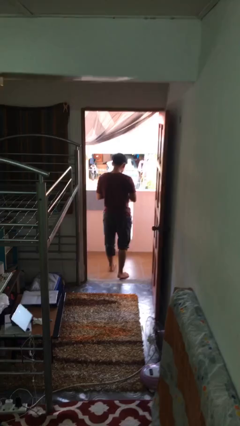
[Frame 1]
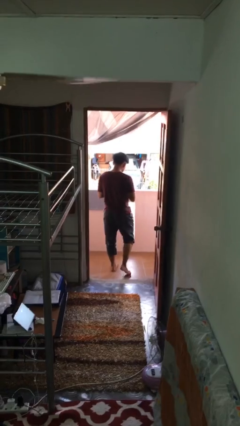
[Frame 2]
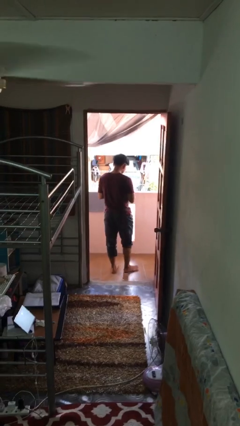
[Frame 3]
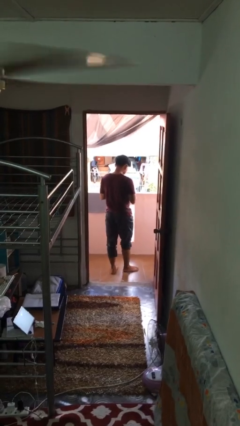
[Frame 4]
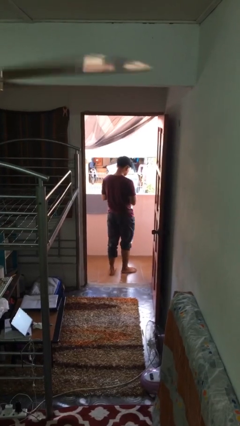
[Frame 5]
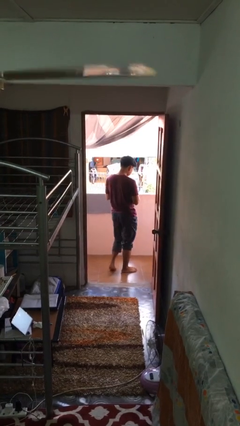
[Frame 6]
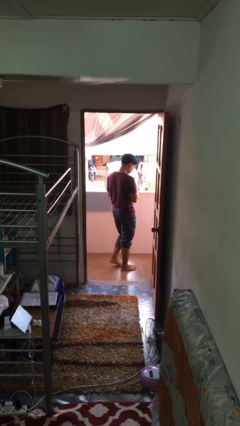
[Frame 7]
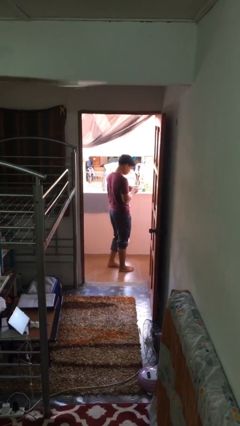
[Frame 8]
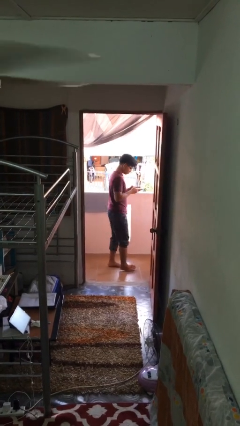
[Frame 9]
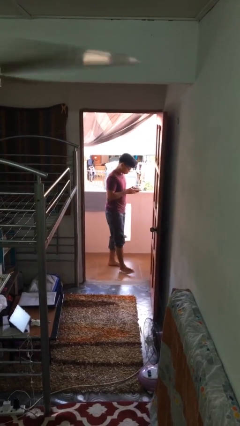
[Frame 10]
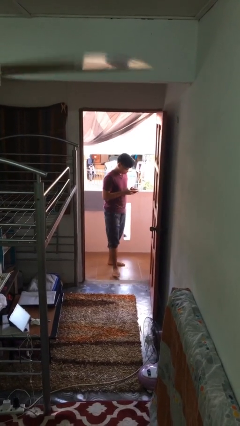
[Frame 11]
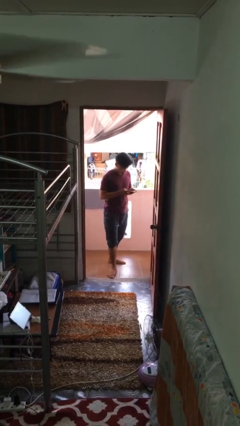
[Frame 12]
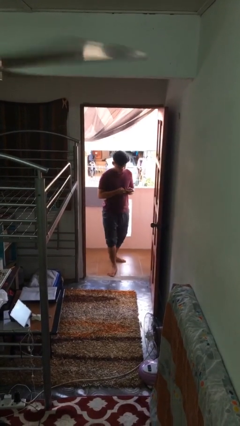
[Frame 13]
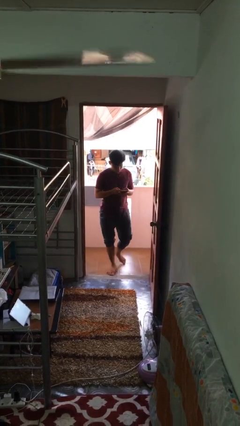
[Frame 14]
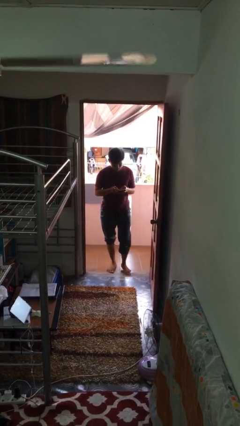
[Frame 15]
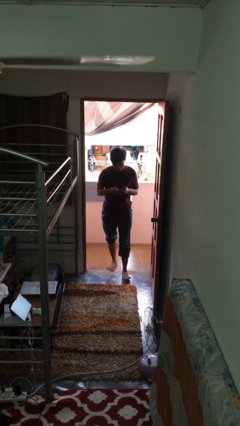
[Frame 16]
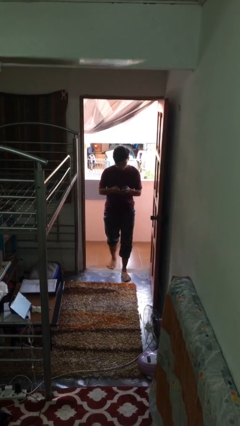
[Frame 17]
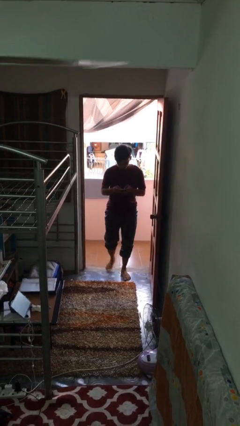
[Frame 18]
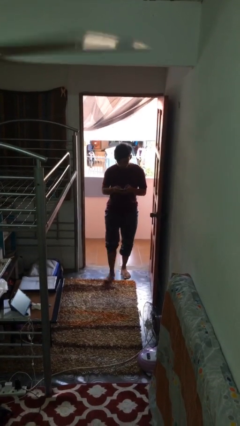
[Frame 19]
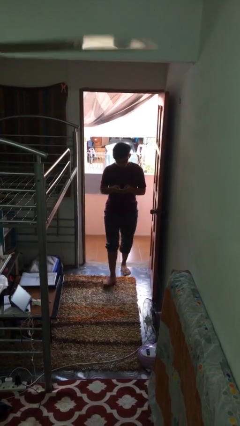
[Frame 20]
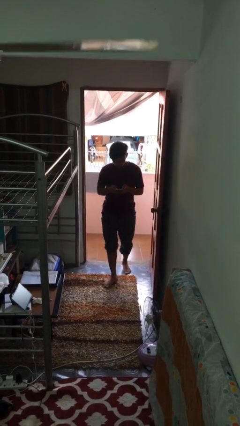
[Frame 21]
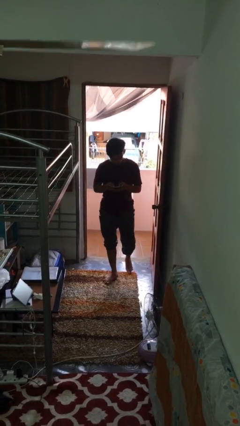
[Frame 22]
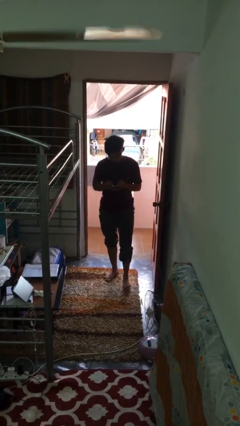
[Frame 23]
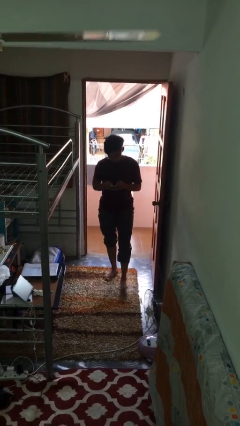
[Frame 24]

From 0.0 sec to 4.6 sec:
person enters scene through structure

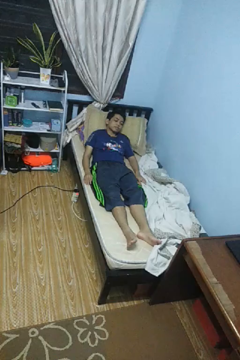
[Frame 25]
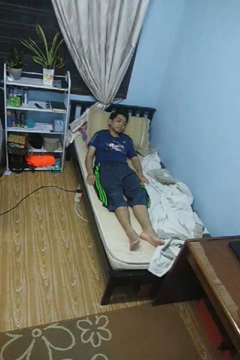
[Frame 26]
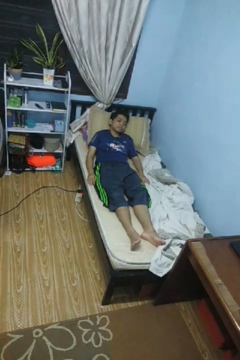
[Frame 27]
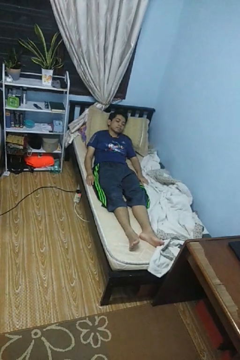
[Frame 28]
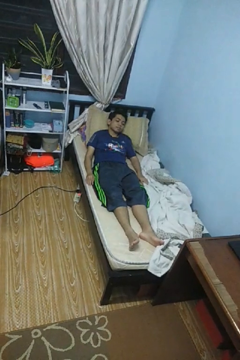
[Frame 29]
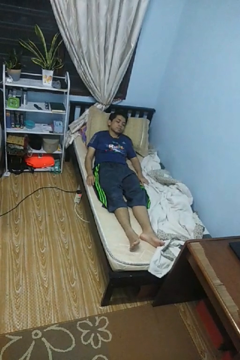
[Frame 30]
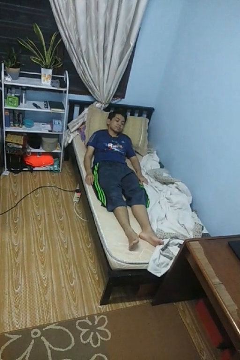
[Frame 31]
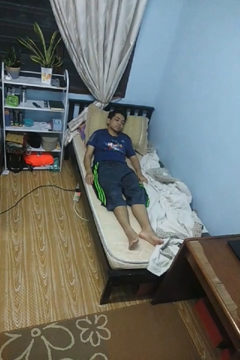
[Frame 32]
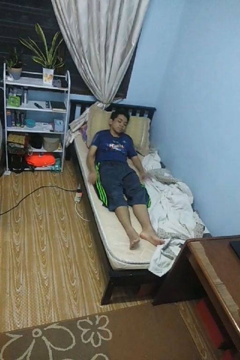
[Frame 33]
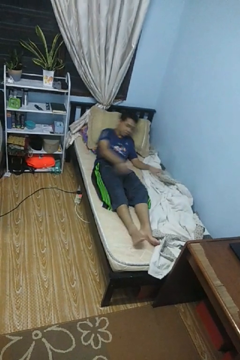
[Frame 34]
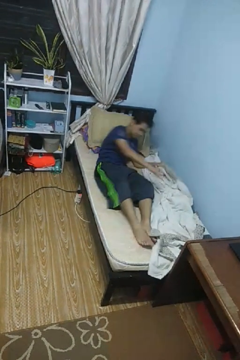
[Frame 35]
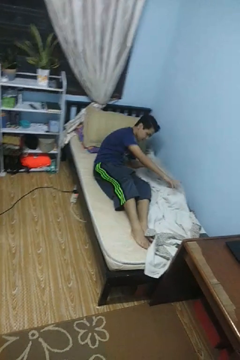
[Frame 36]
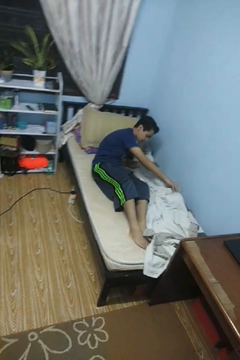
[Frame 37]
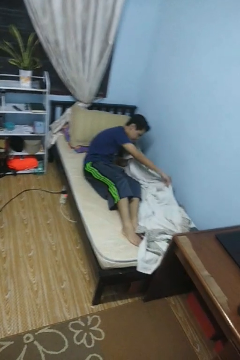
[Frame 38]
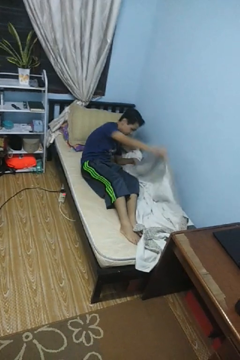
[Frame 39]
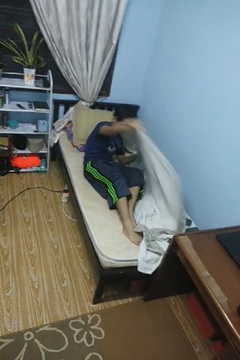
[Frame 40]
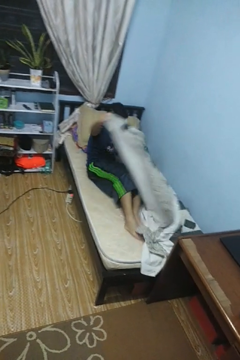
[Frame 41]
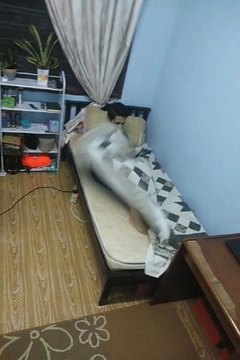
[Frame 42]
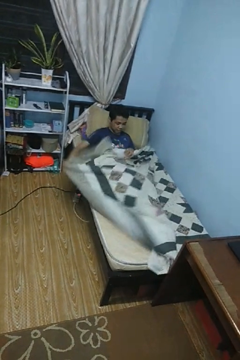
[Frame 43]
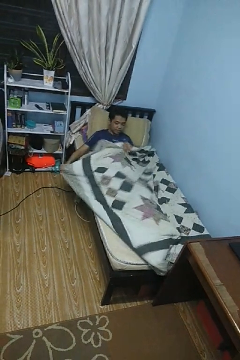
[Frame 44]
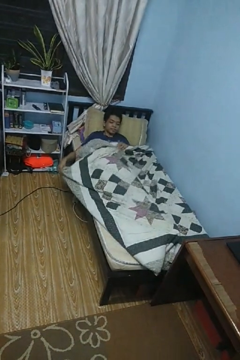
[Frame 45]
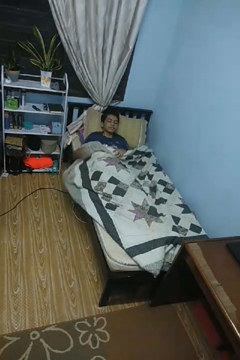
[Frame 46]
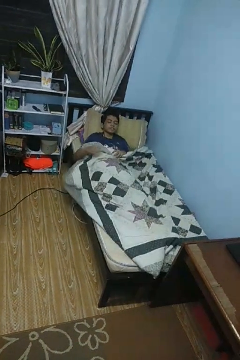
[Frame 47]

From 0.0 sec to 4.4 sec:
person covers with bedsheets

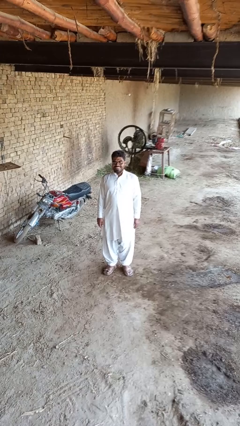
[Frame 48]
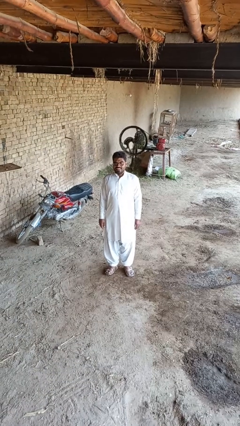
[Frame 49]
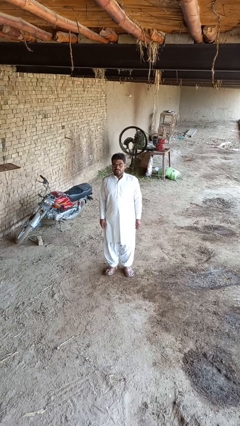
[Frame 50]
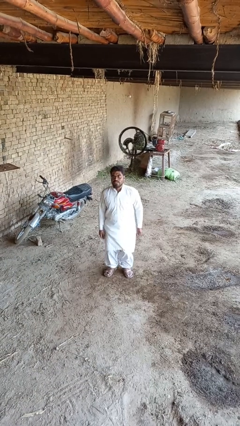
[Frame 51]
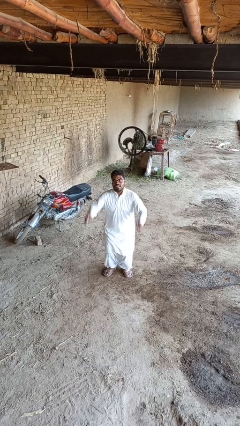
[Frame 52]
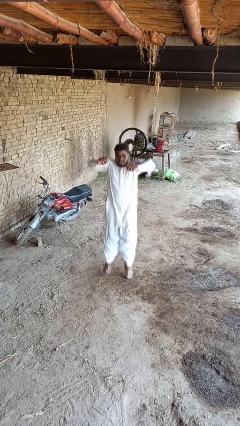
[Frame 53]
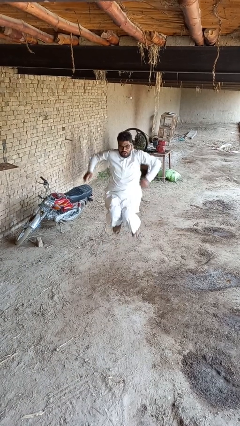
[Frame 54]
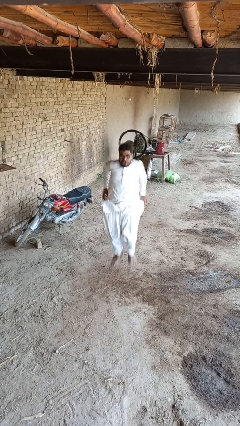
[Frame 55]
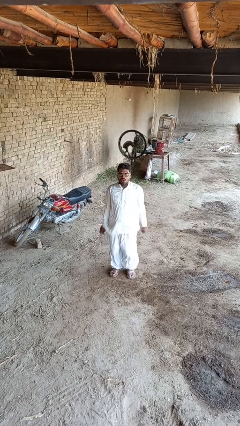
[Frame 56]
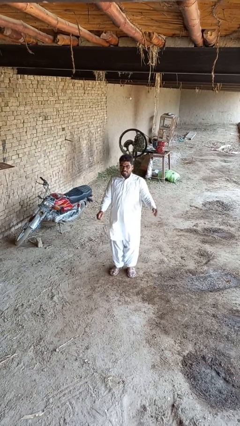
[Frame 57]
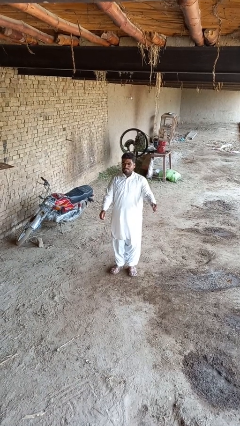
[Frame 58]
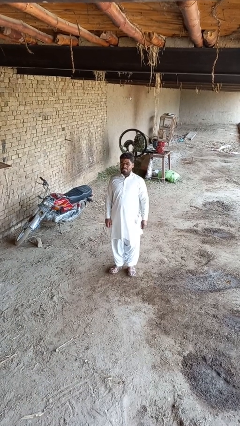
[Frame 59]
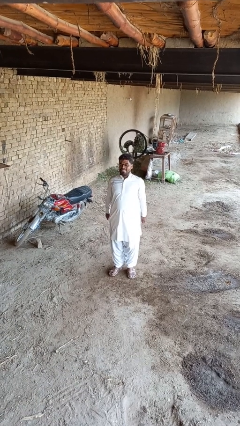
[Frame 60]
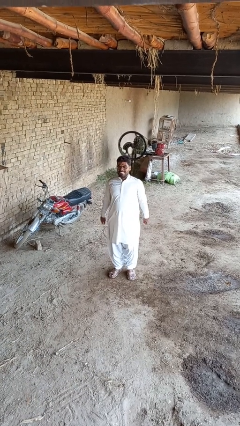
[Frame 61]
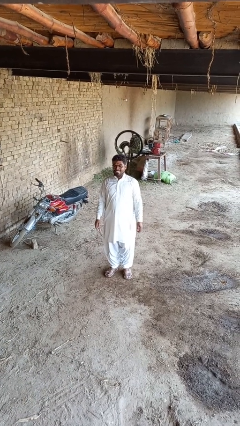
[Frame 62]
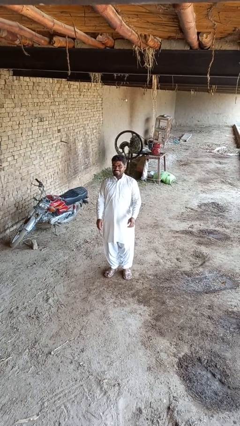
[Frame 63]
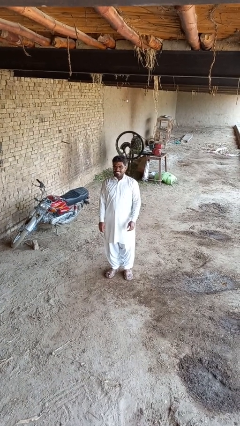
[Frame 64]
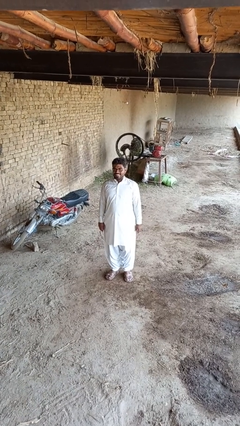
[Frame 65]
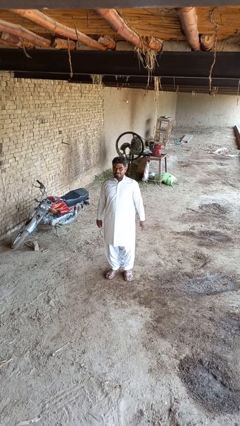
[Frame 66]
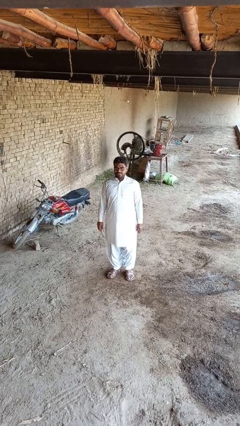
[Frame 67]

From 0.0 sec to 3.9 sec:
person jumps

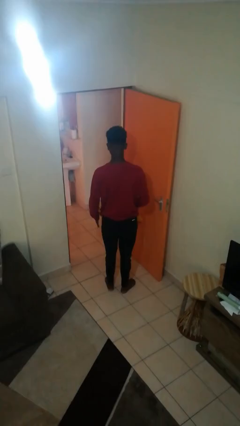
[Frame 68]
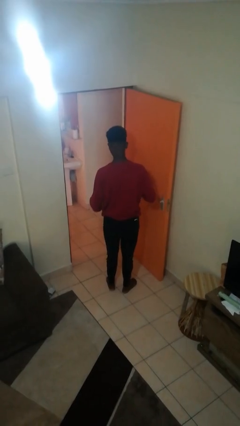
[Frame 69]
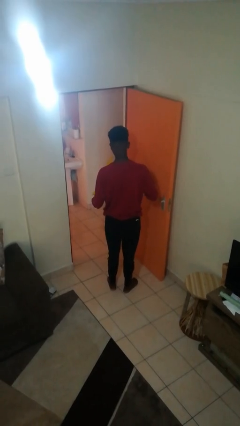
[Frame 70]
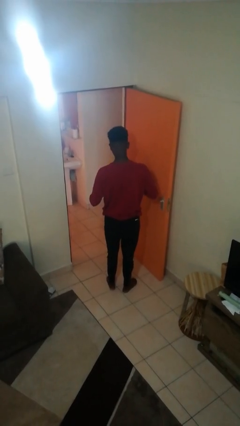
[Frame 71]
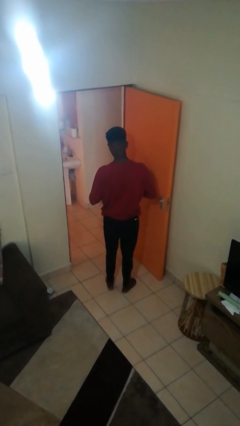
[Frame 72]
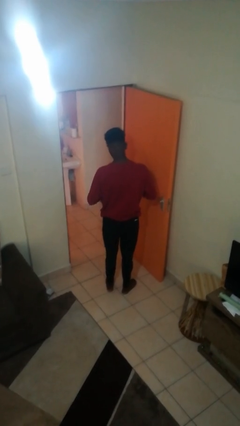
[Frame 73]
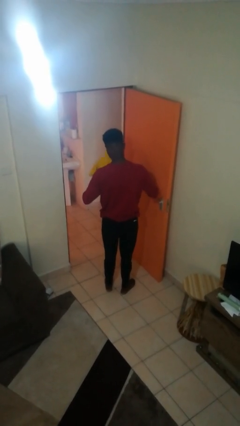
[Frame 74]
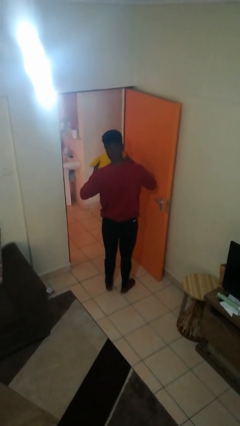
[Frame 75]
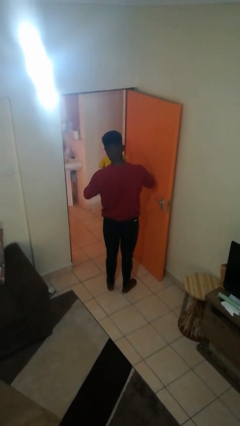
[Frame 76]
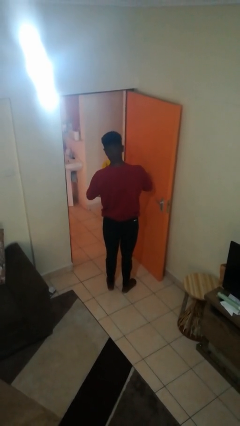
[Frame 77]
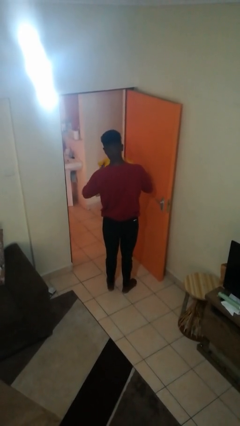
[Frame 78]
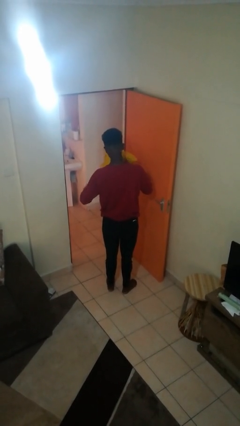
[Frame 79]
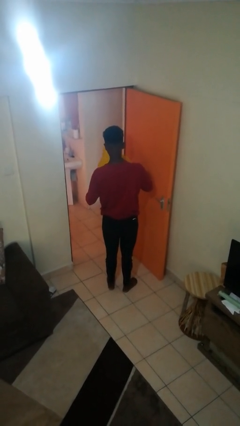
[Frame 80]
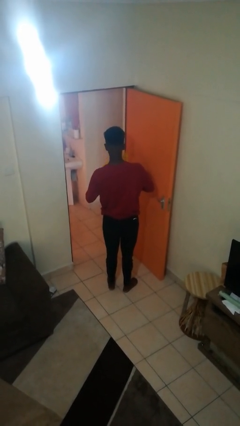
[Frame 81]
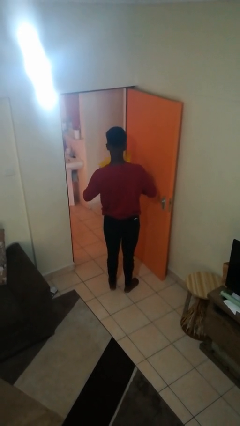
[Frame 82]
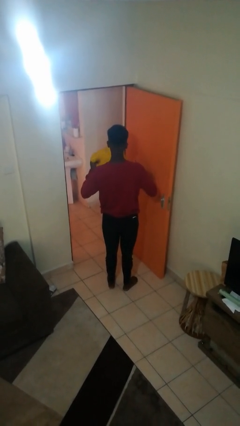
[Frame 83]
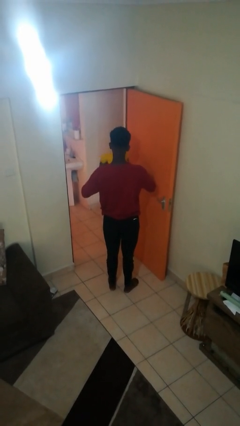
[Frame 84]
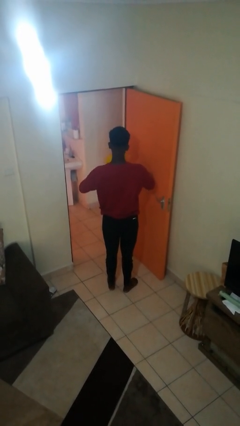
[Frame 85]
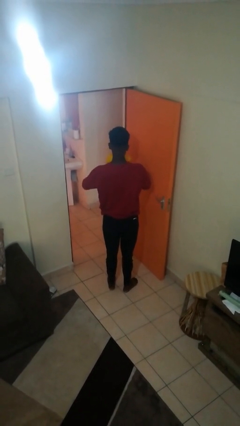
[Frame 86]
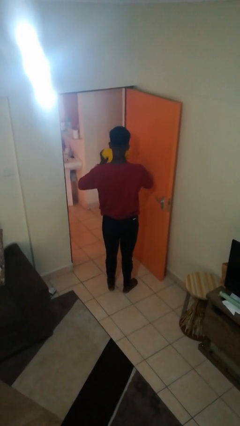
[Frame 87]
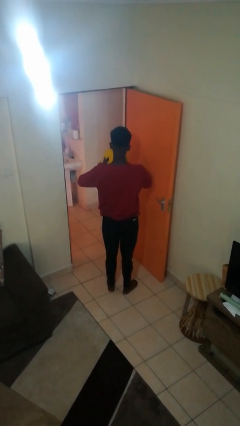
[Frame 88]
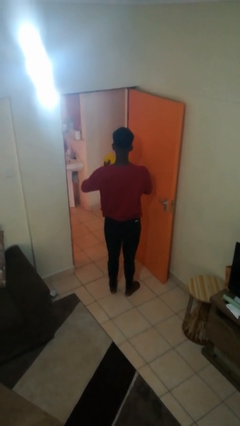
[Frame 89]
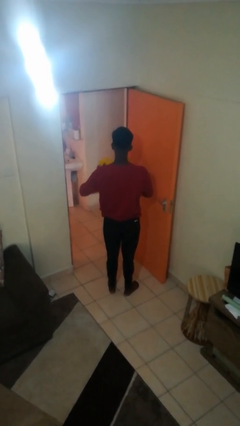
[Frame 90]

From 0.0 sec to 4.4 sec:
person squeezes object

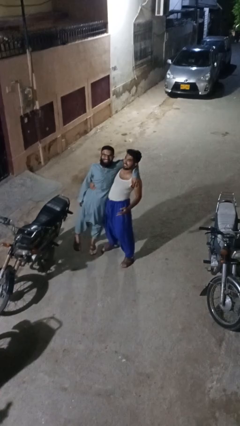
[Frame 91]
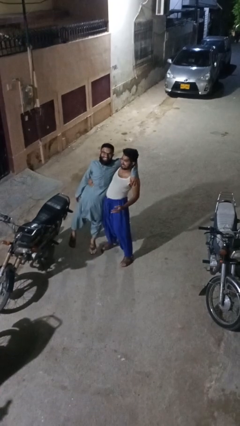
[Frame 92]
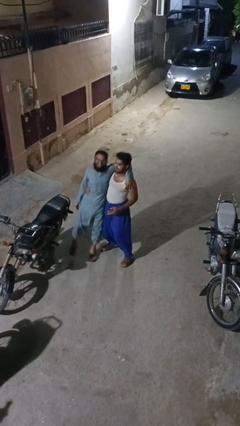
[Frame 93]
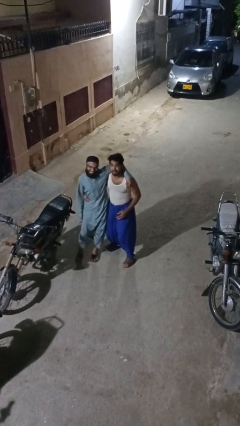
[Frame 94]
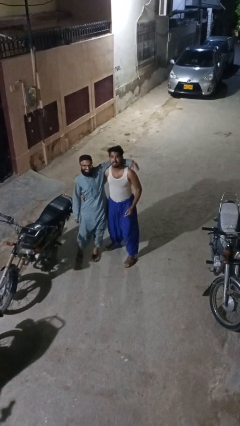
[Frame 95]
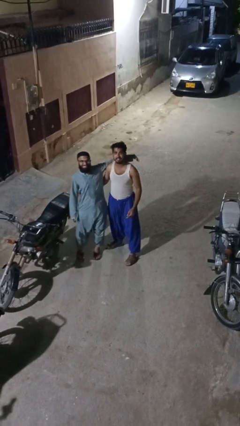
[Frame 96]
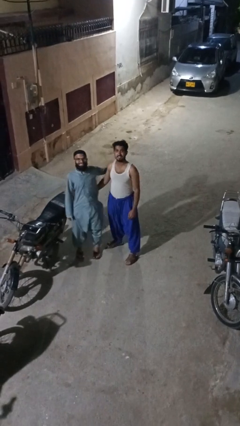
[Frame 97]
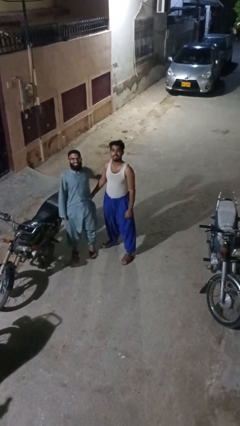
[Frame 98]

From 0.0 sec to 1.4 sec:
person puts down person
